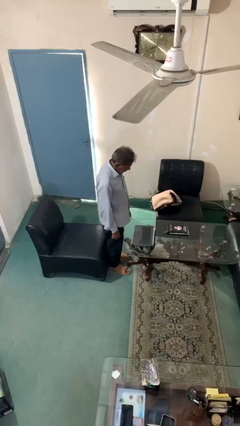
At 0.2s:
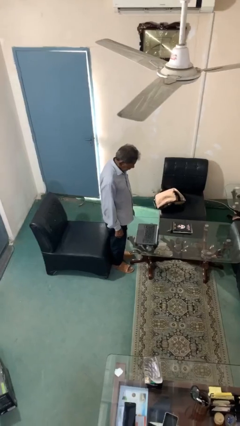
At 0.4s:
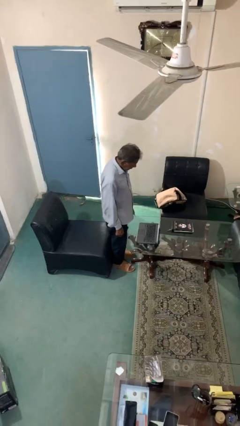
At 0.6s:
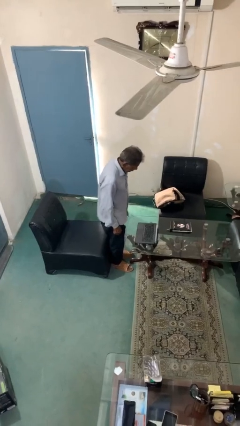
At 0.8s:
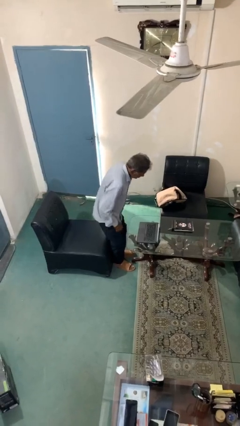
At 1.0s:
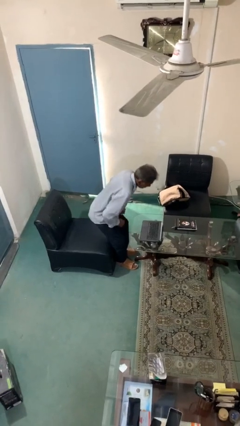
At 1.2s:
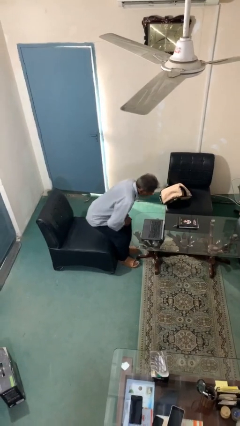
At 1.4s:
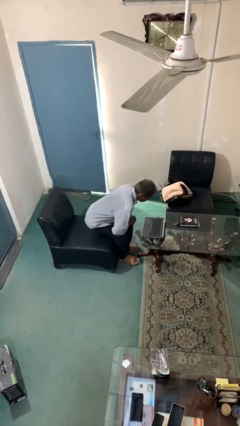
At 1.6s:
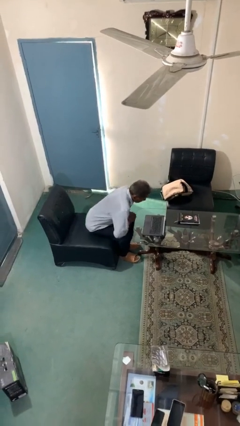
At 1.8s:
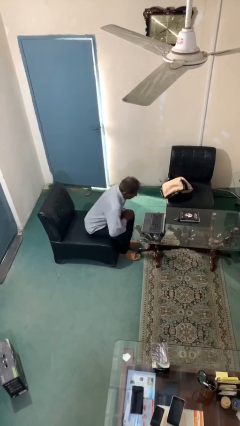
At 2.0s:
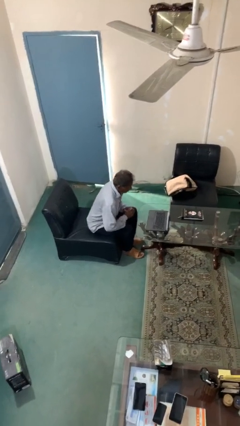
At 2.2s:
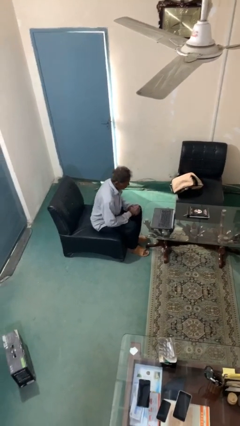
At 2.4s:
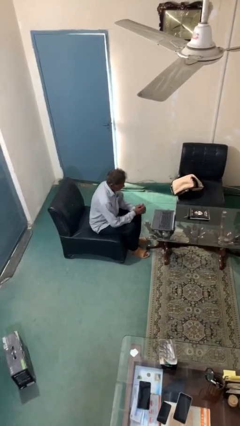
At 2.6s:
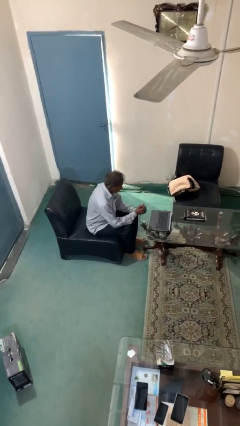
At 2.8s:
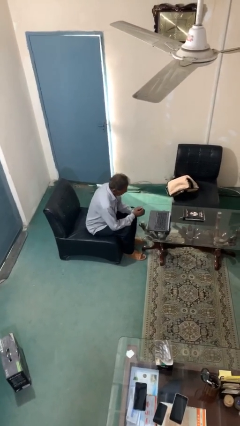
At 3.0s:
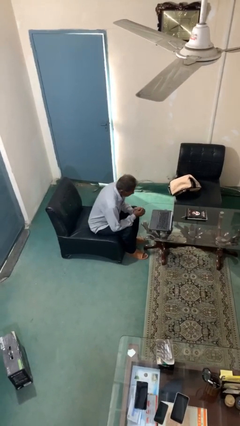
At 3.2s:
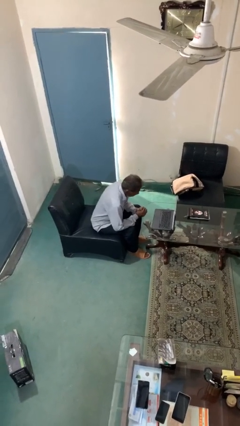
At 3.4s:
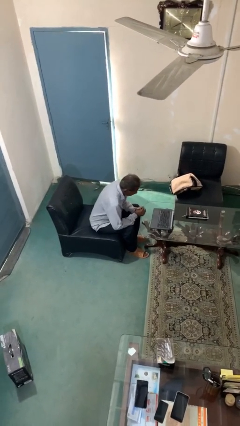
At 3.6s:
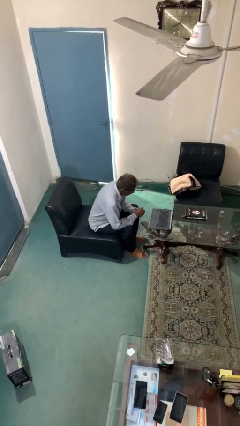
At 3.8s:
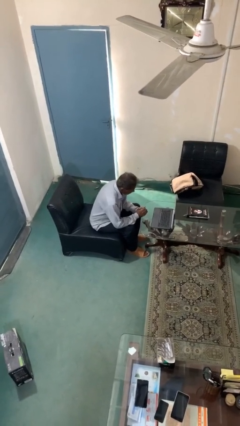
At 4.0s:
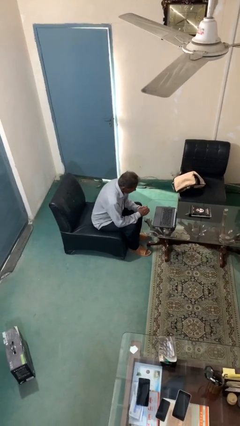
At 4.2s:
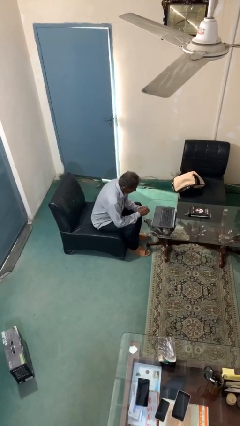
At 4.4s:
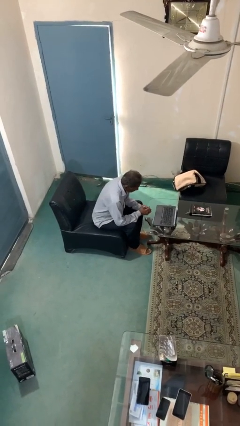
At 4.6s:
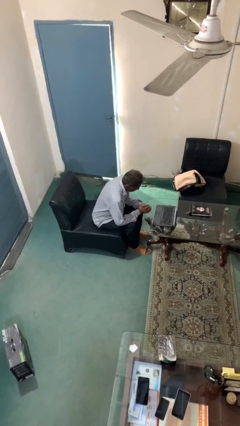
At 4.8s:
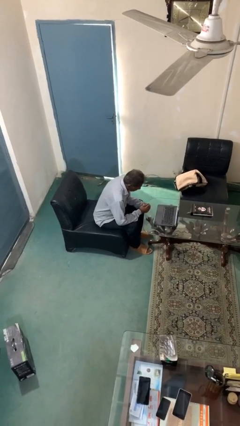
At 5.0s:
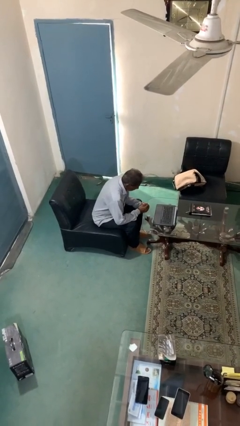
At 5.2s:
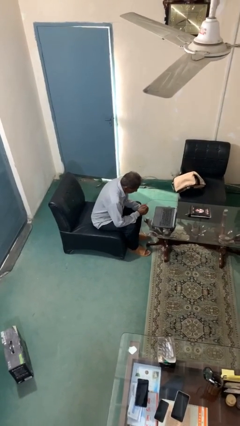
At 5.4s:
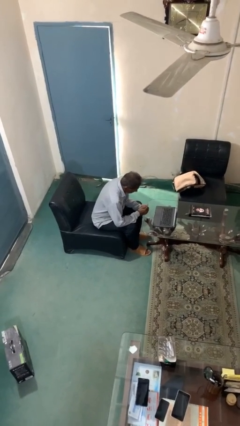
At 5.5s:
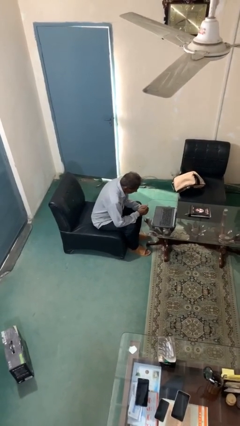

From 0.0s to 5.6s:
person sits down

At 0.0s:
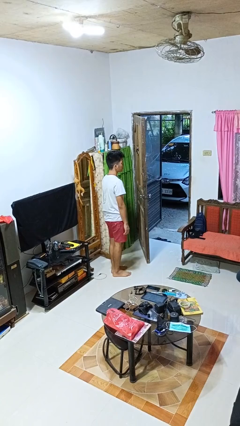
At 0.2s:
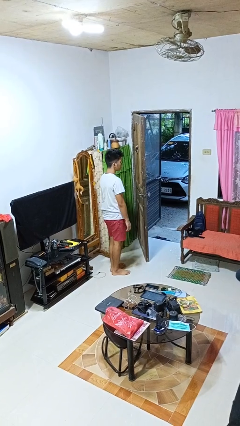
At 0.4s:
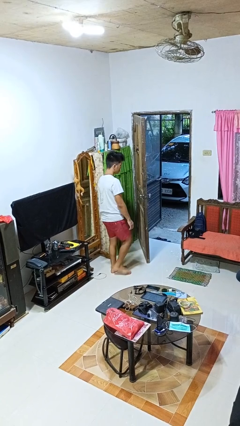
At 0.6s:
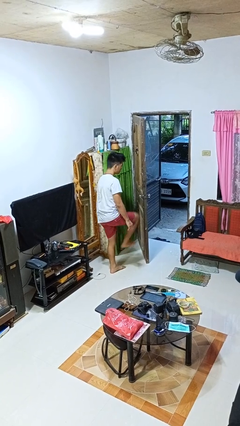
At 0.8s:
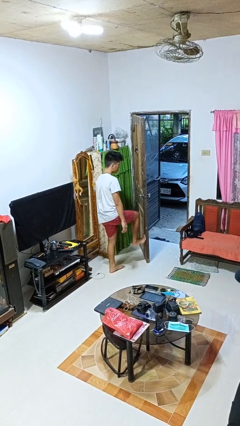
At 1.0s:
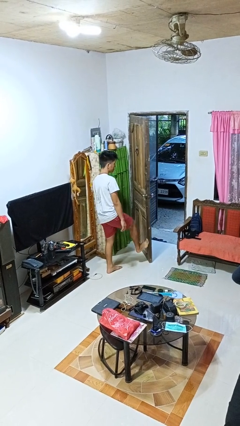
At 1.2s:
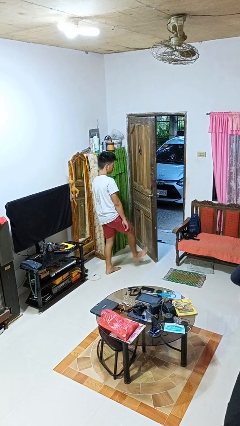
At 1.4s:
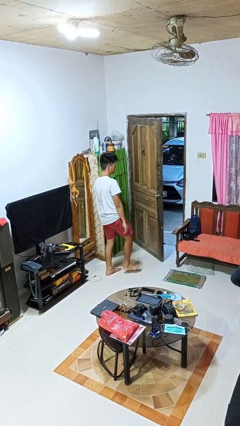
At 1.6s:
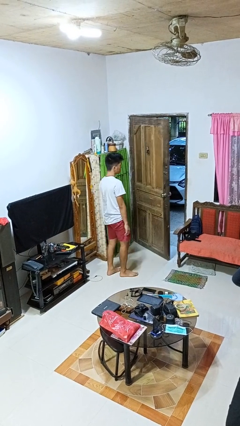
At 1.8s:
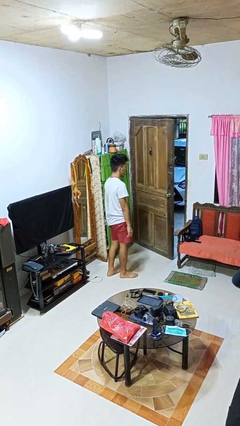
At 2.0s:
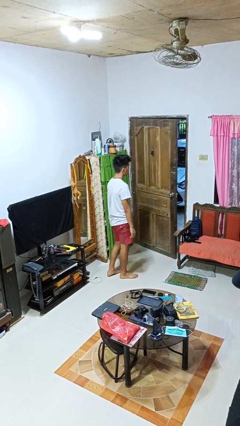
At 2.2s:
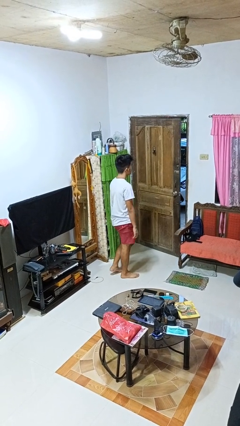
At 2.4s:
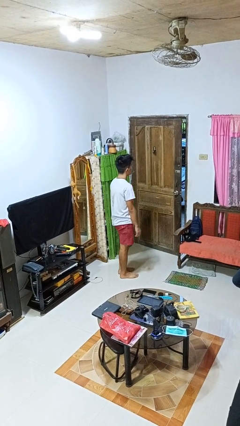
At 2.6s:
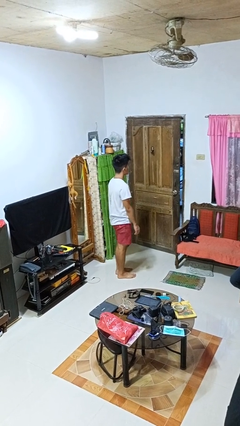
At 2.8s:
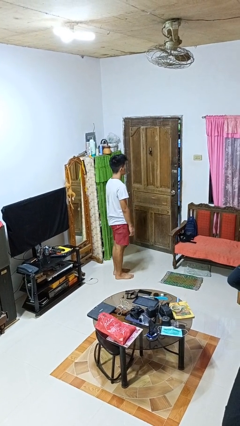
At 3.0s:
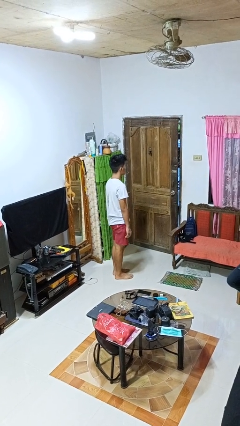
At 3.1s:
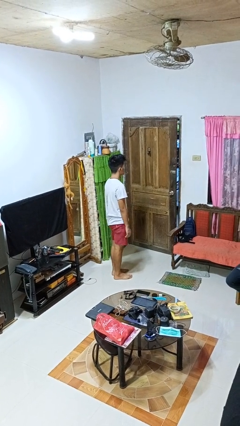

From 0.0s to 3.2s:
person closes door with foot

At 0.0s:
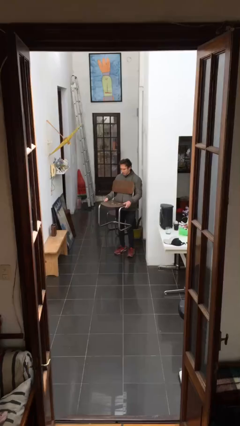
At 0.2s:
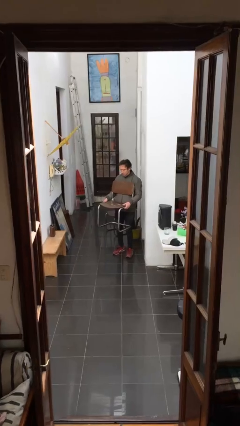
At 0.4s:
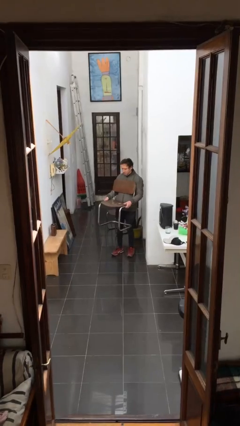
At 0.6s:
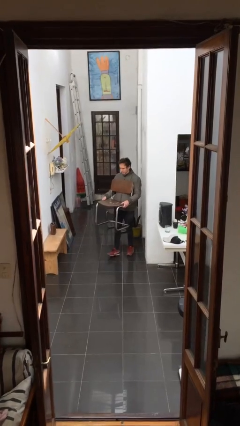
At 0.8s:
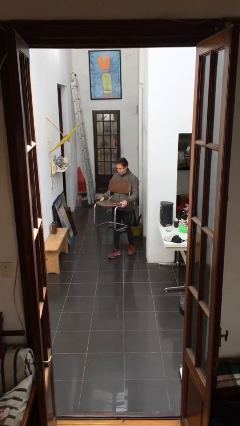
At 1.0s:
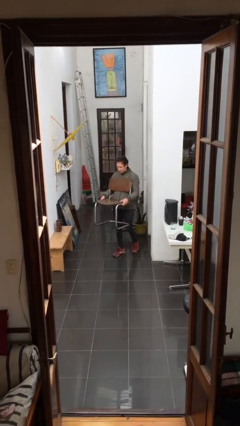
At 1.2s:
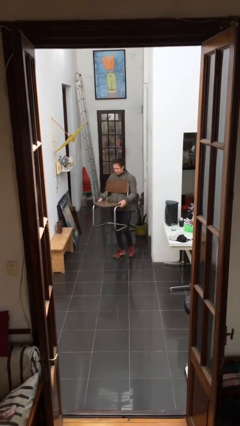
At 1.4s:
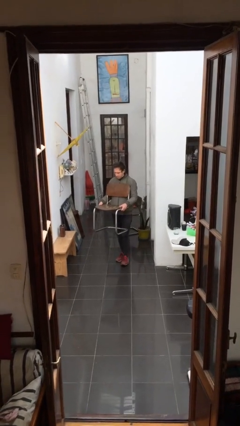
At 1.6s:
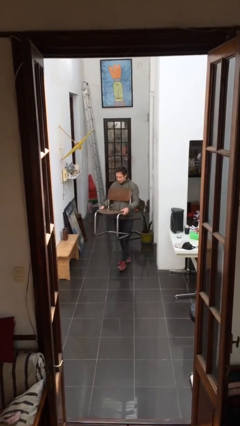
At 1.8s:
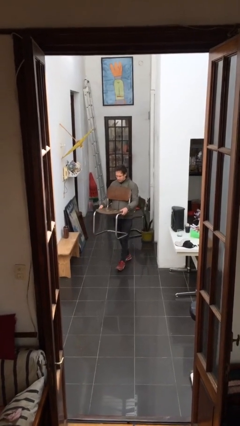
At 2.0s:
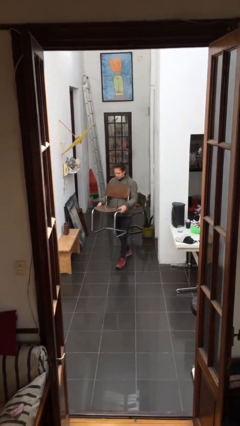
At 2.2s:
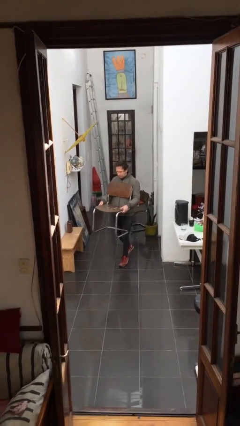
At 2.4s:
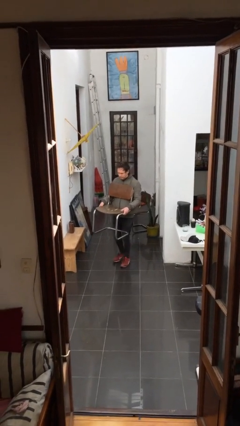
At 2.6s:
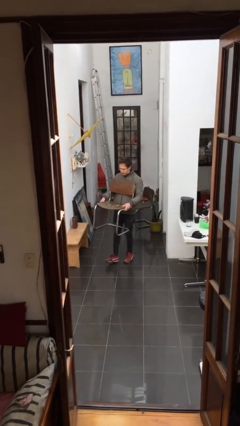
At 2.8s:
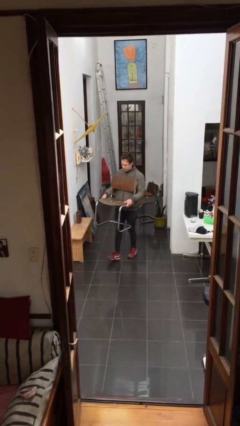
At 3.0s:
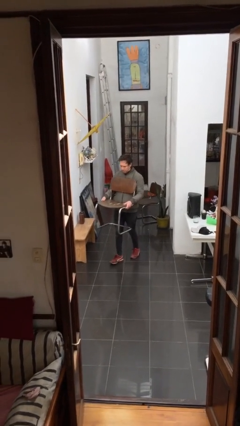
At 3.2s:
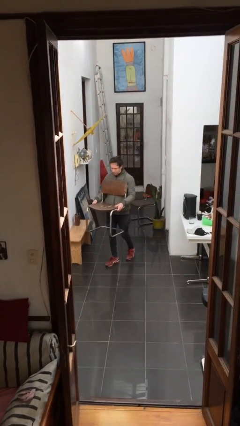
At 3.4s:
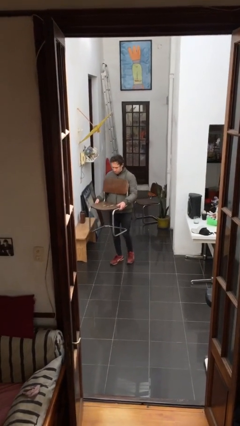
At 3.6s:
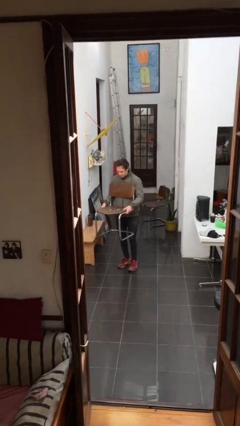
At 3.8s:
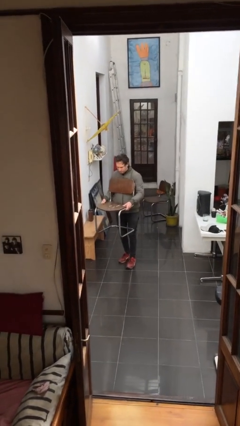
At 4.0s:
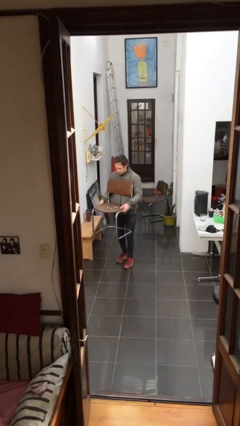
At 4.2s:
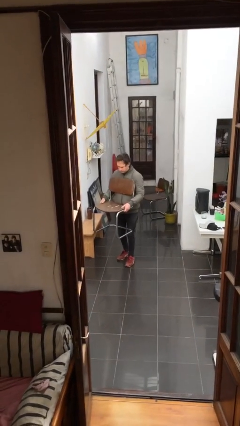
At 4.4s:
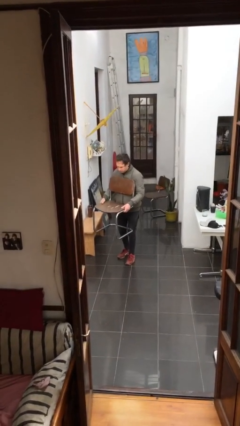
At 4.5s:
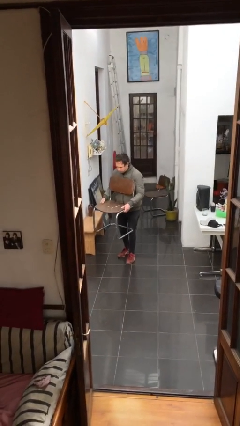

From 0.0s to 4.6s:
person carries heavy object

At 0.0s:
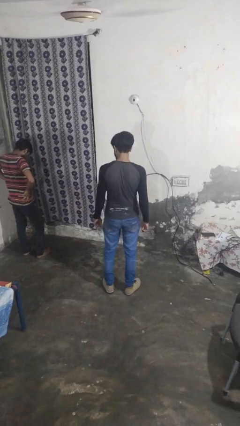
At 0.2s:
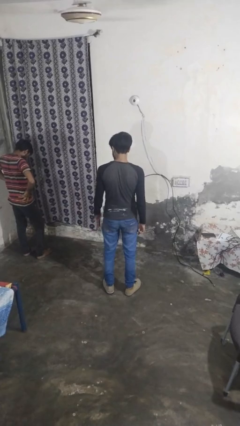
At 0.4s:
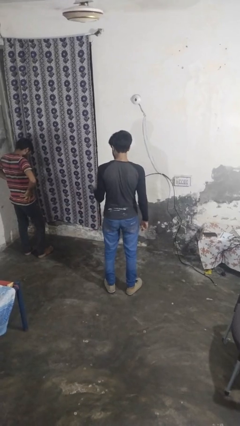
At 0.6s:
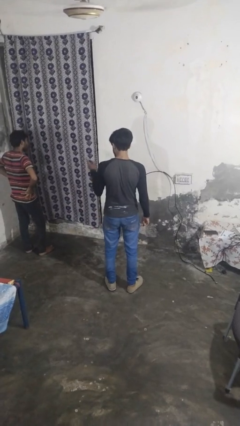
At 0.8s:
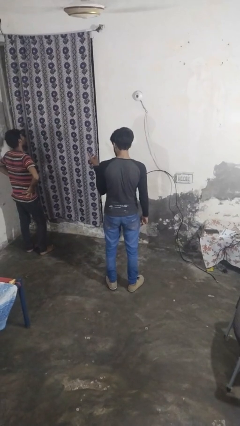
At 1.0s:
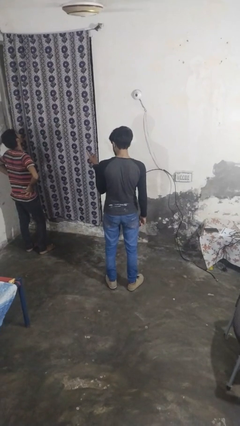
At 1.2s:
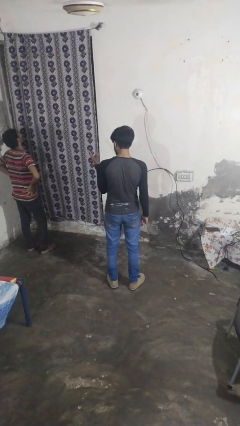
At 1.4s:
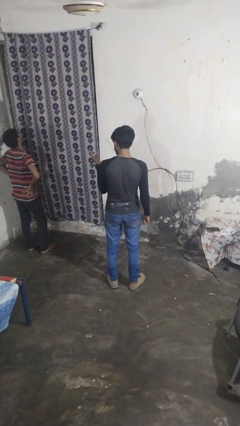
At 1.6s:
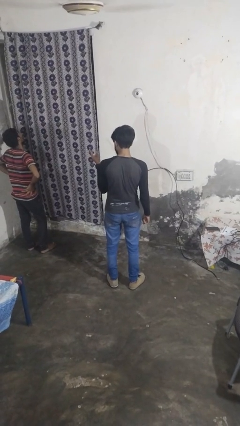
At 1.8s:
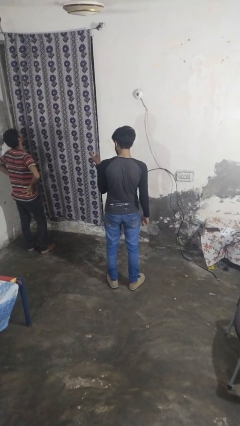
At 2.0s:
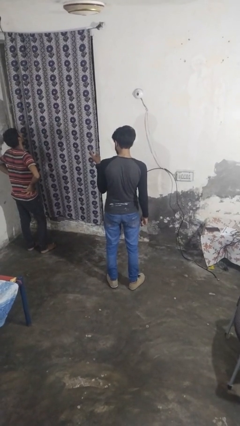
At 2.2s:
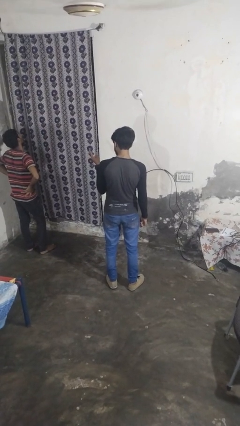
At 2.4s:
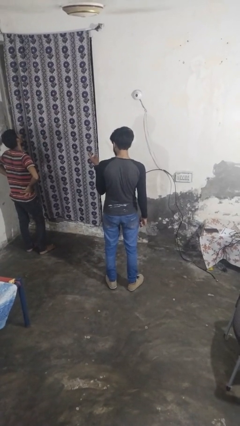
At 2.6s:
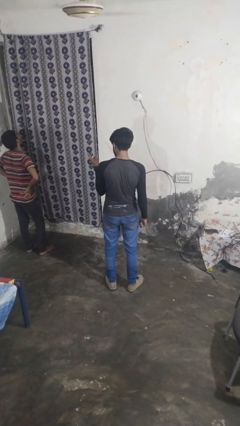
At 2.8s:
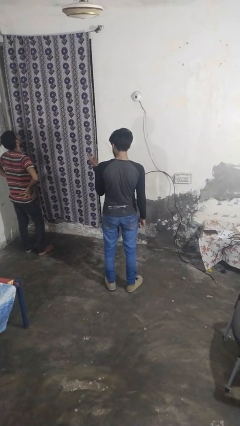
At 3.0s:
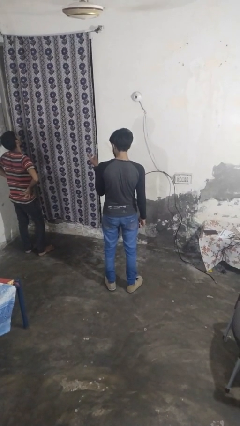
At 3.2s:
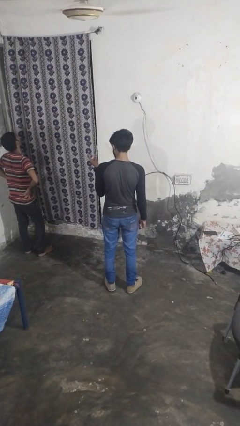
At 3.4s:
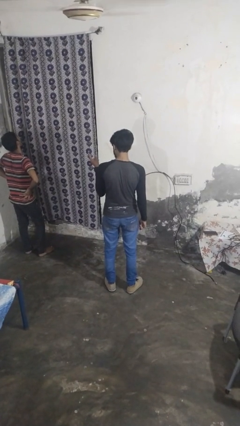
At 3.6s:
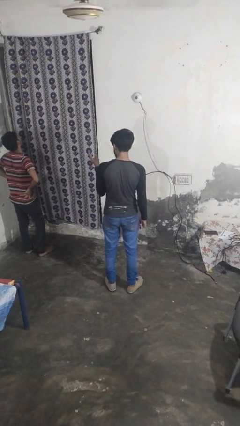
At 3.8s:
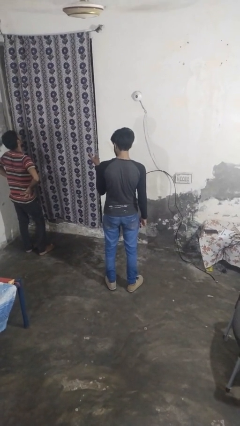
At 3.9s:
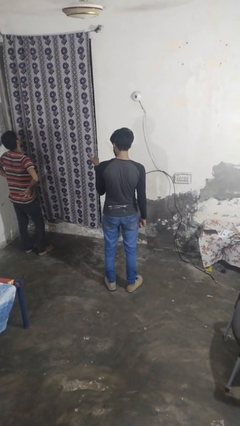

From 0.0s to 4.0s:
person points at person
